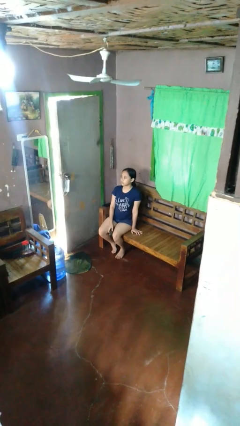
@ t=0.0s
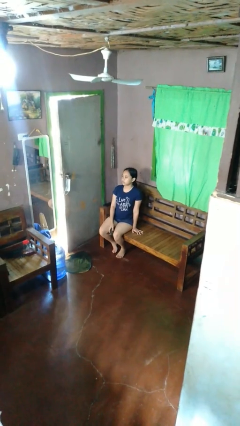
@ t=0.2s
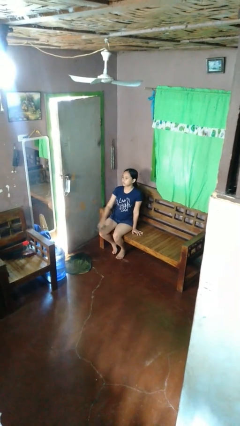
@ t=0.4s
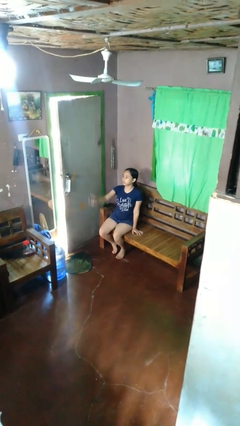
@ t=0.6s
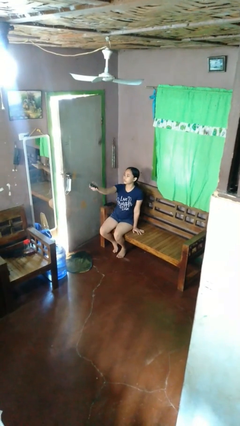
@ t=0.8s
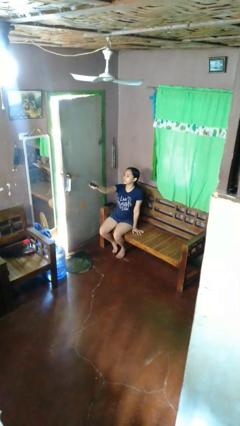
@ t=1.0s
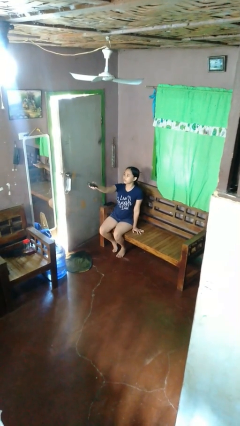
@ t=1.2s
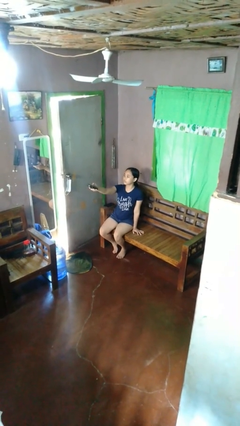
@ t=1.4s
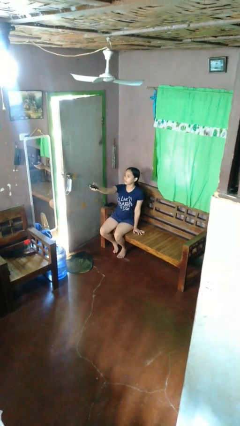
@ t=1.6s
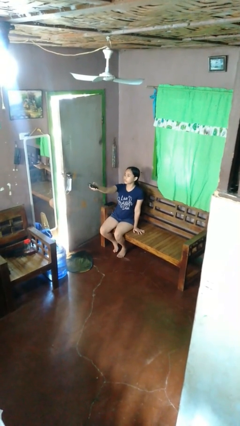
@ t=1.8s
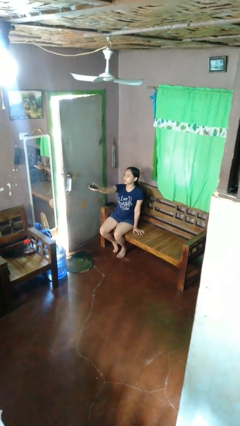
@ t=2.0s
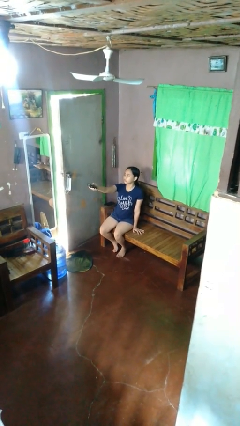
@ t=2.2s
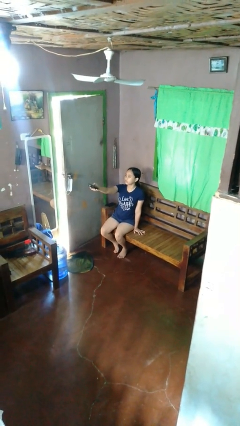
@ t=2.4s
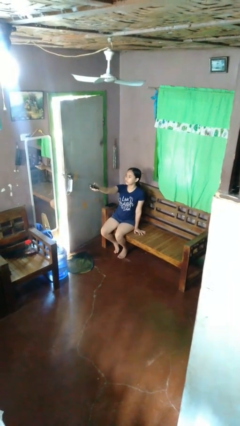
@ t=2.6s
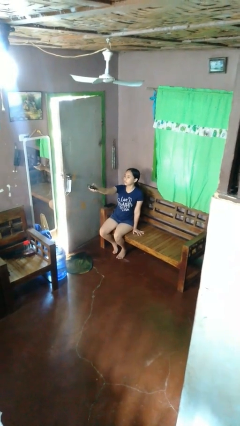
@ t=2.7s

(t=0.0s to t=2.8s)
person uses television remote

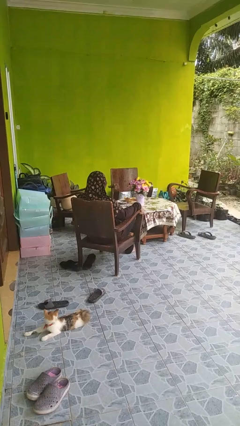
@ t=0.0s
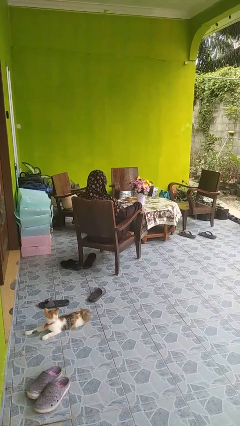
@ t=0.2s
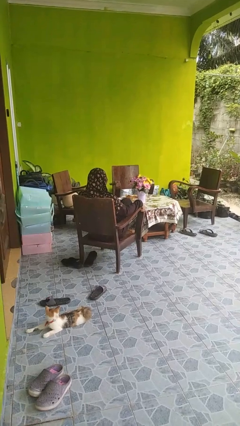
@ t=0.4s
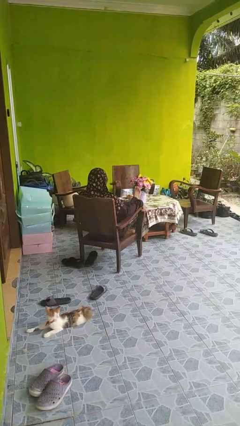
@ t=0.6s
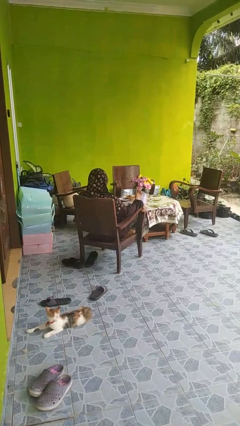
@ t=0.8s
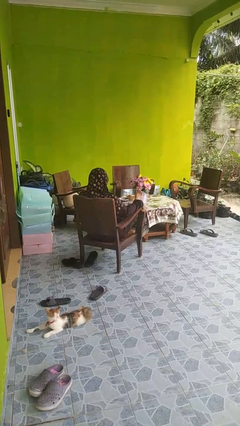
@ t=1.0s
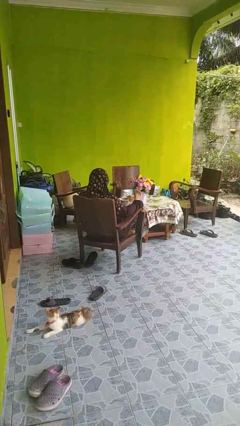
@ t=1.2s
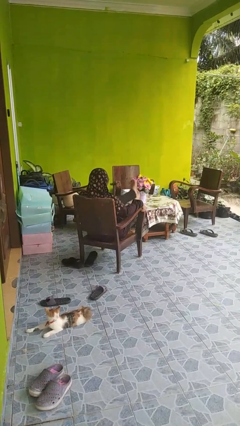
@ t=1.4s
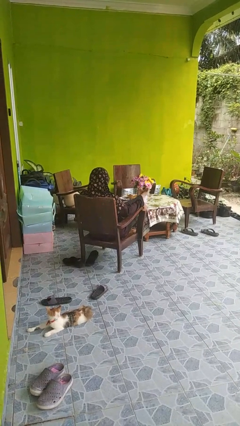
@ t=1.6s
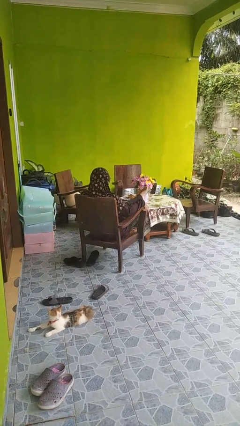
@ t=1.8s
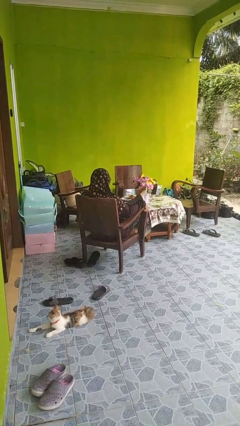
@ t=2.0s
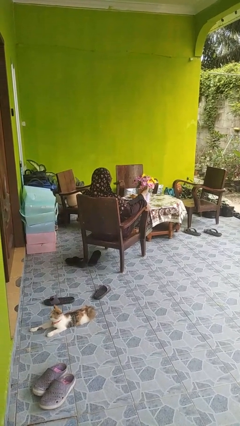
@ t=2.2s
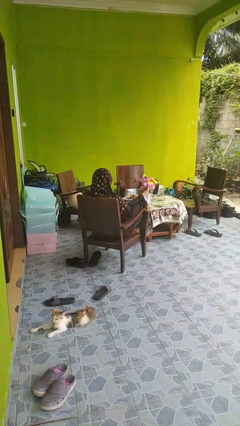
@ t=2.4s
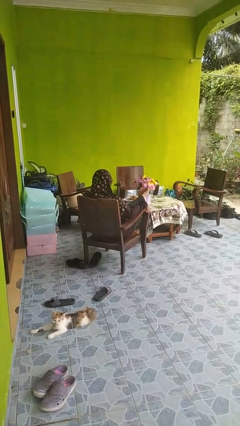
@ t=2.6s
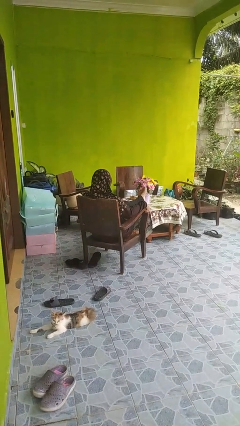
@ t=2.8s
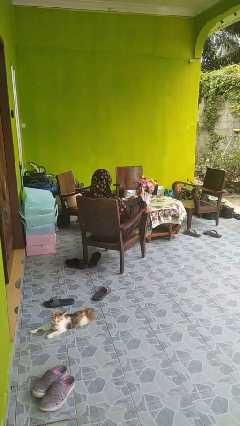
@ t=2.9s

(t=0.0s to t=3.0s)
person puts feet up

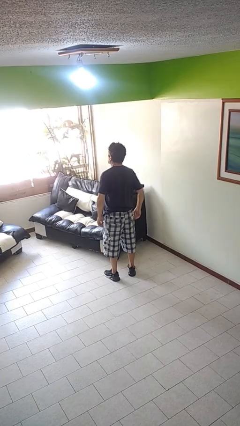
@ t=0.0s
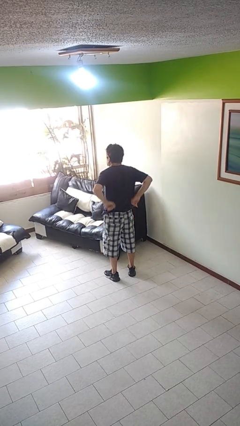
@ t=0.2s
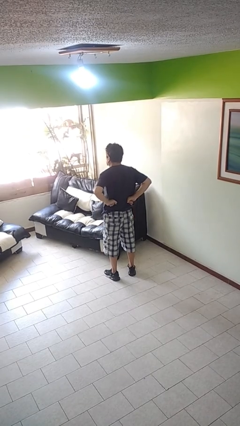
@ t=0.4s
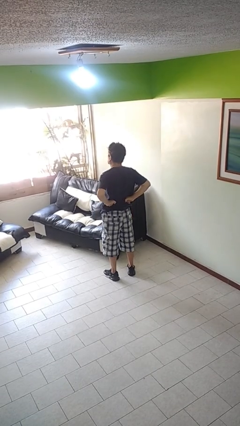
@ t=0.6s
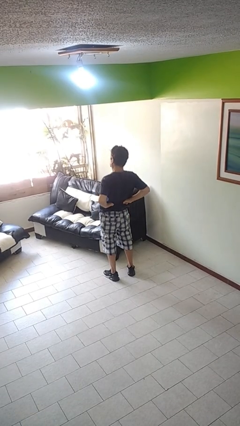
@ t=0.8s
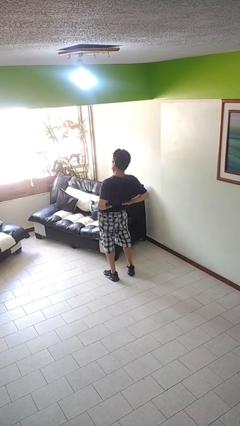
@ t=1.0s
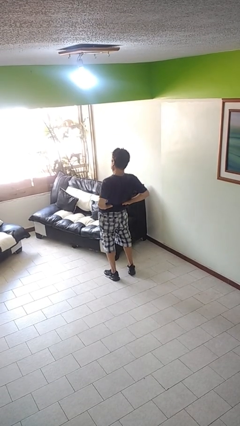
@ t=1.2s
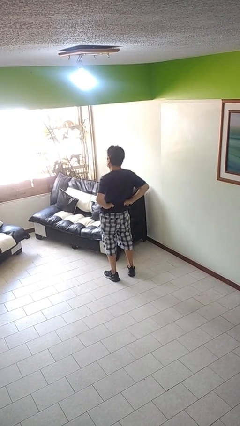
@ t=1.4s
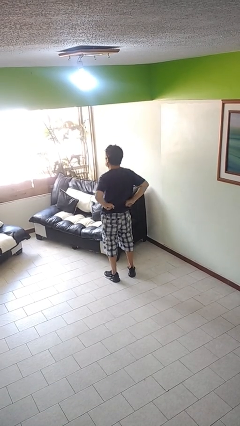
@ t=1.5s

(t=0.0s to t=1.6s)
person stretches back

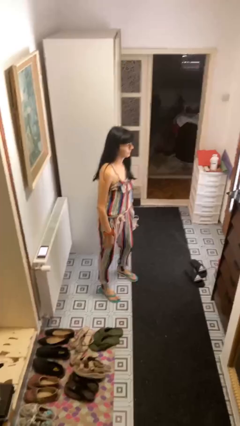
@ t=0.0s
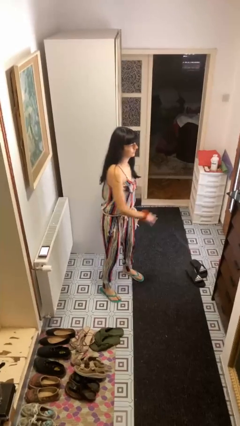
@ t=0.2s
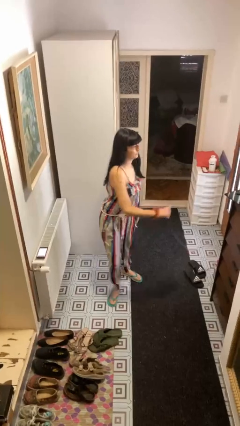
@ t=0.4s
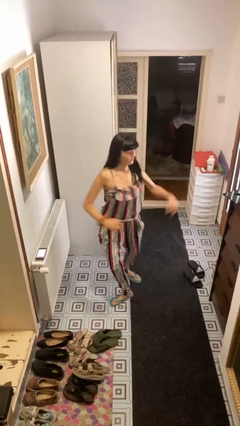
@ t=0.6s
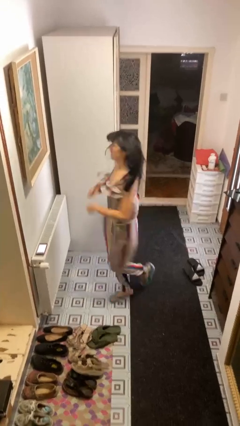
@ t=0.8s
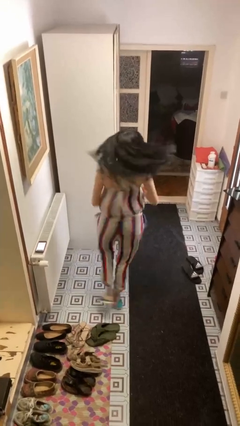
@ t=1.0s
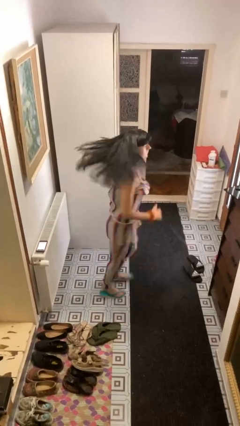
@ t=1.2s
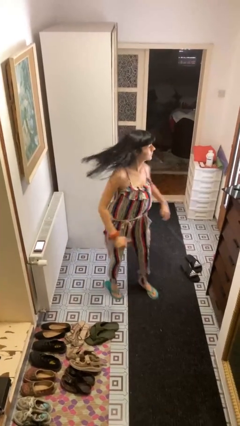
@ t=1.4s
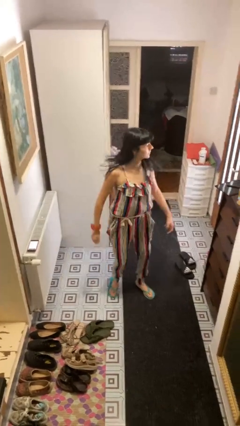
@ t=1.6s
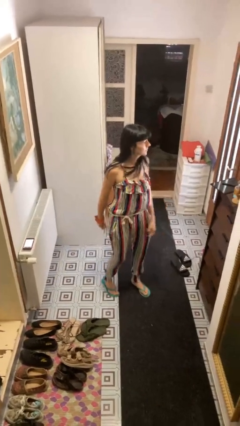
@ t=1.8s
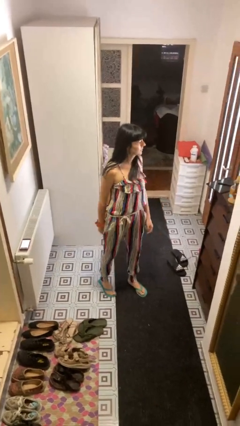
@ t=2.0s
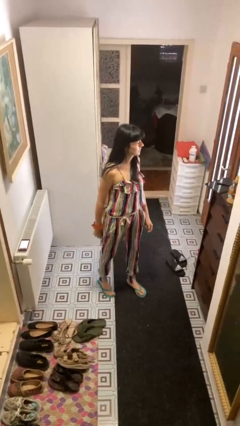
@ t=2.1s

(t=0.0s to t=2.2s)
person twirls

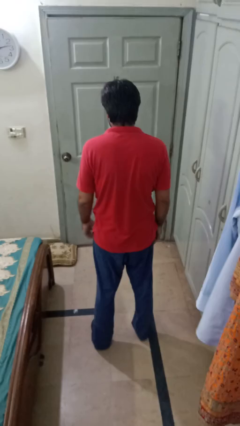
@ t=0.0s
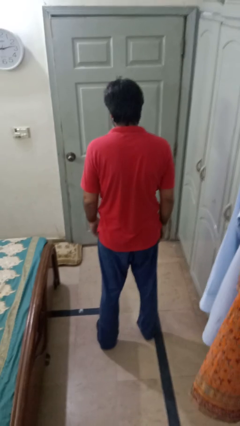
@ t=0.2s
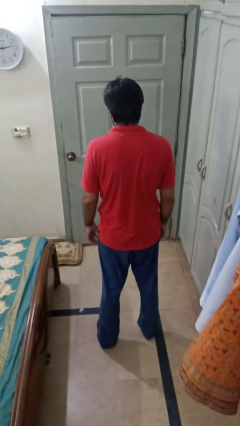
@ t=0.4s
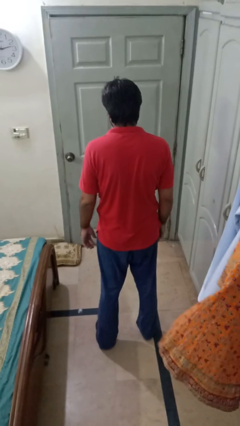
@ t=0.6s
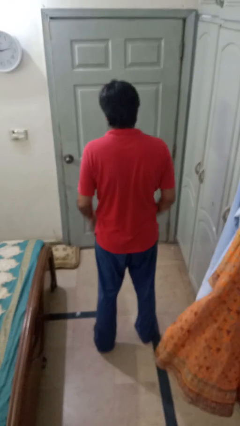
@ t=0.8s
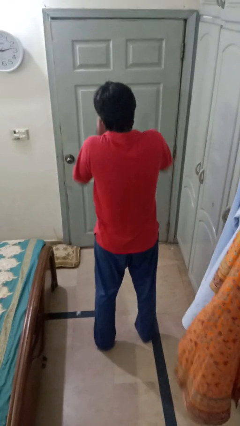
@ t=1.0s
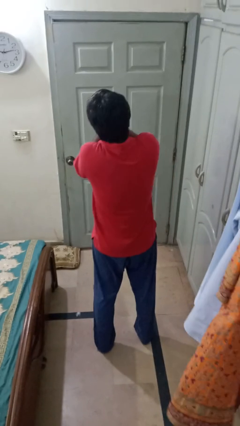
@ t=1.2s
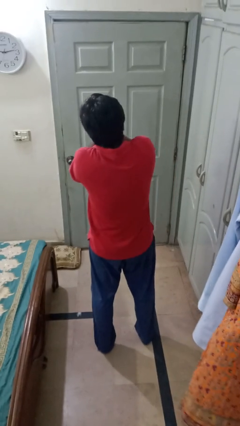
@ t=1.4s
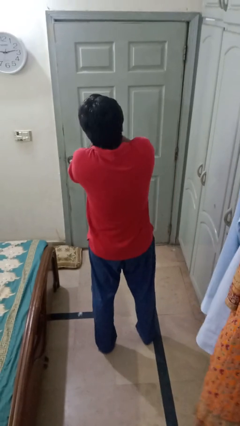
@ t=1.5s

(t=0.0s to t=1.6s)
person covers face with hands

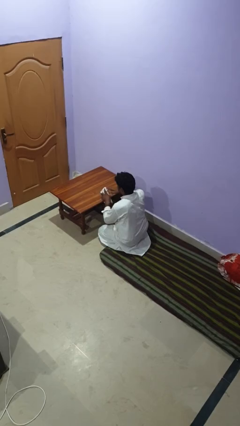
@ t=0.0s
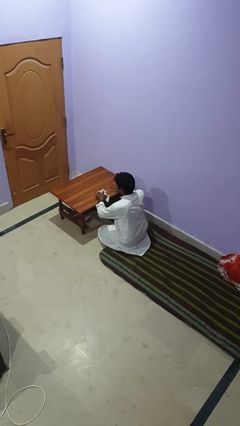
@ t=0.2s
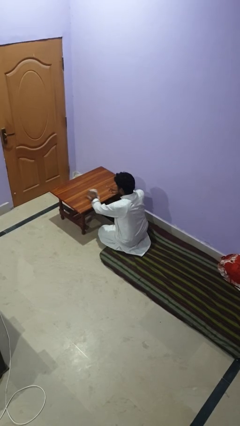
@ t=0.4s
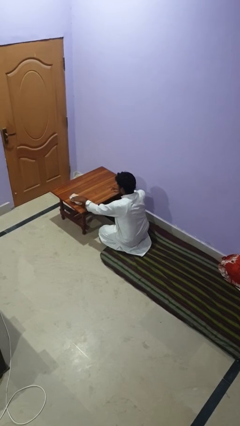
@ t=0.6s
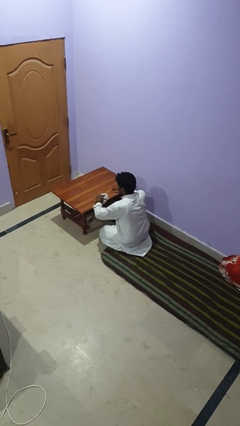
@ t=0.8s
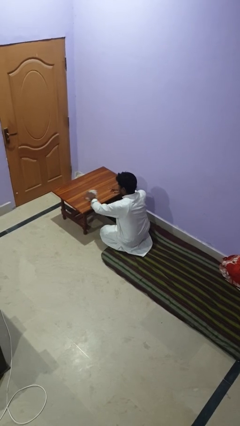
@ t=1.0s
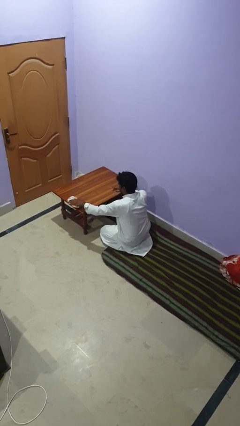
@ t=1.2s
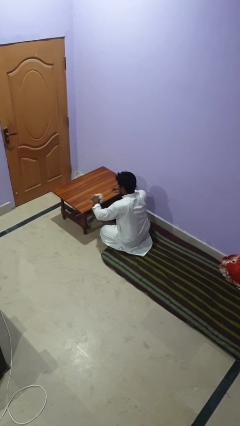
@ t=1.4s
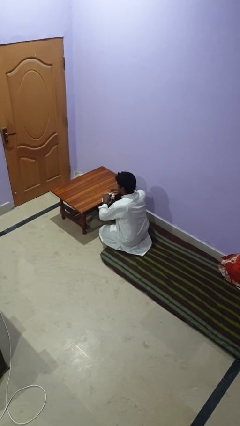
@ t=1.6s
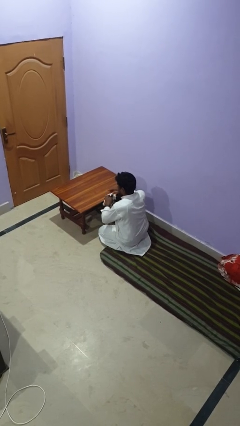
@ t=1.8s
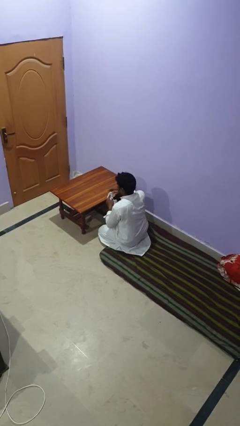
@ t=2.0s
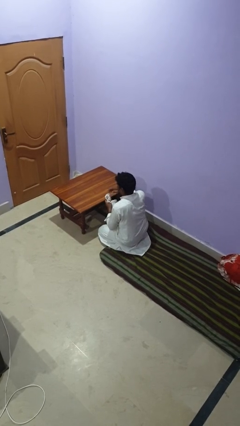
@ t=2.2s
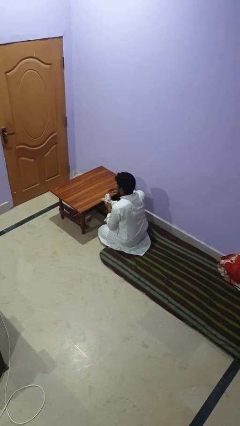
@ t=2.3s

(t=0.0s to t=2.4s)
person cleans table with rag

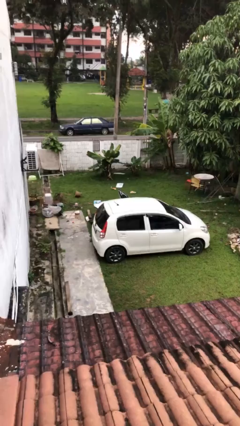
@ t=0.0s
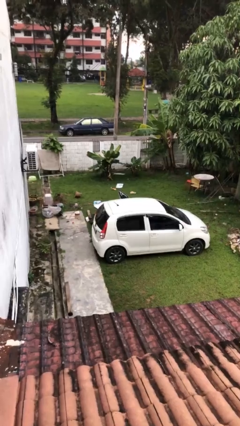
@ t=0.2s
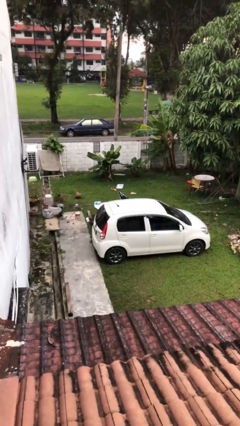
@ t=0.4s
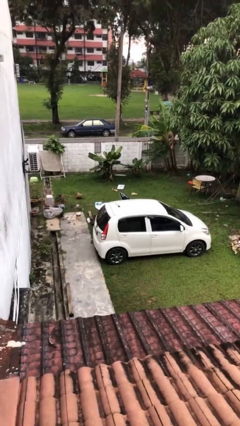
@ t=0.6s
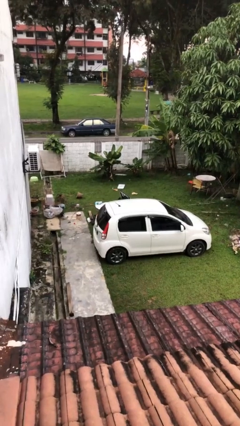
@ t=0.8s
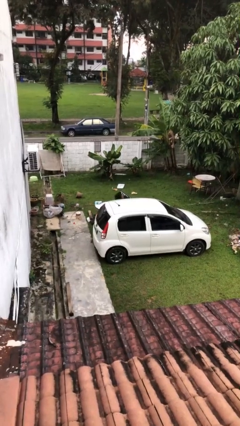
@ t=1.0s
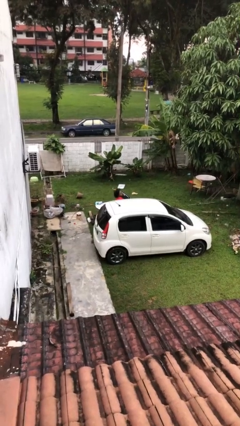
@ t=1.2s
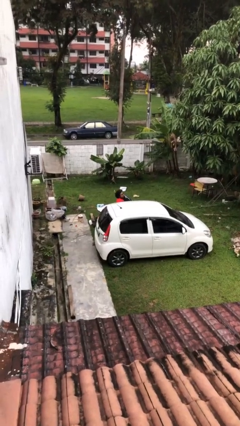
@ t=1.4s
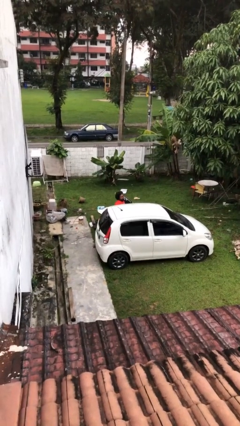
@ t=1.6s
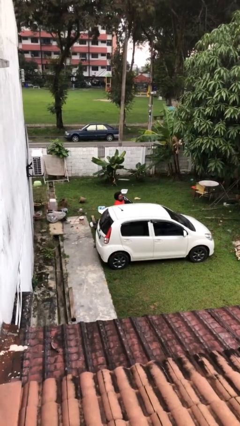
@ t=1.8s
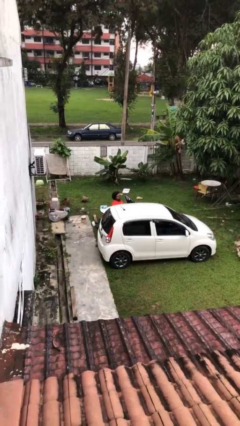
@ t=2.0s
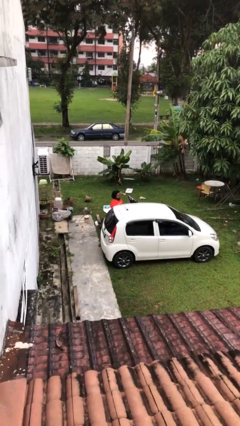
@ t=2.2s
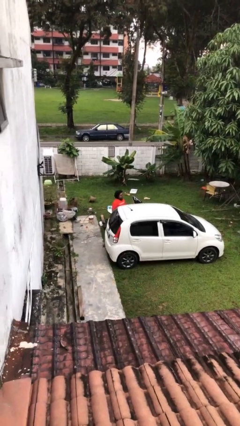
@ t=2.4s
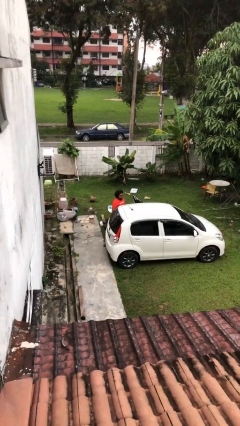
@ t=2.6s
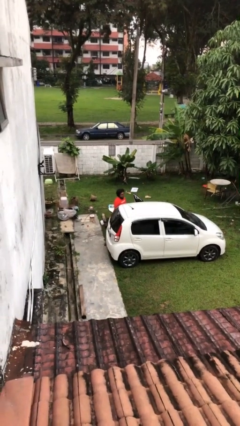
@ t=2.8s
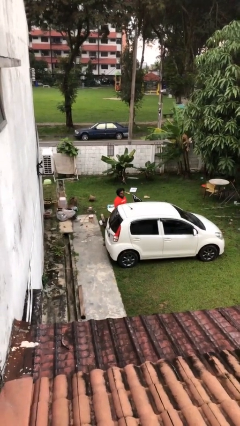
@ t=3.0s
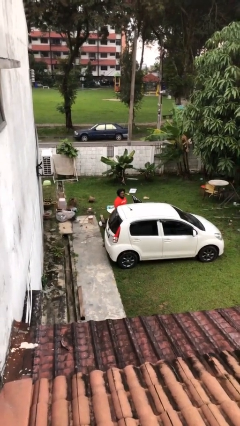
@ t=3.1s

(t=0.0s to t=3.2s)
person exits car
